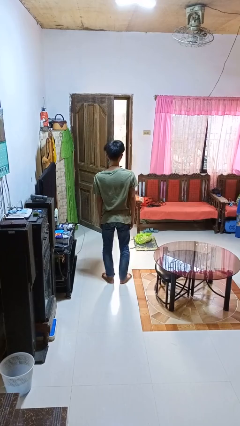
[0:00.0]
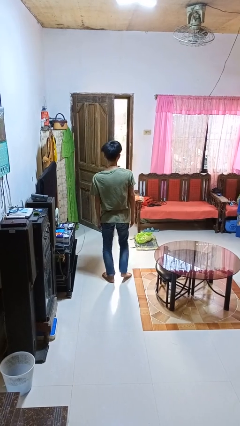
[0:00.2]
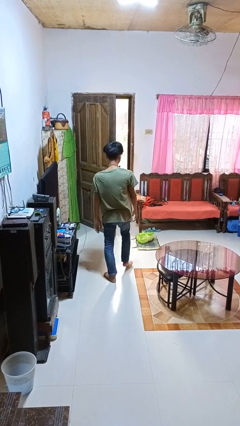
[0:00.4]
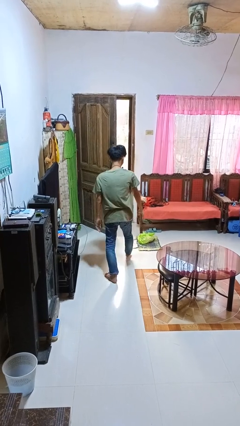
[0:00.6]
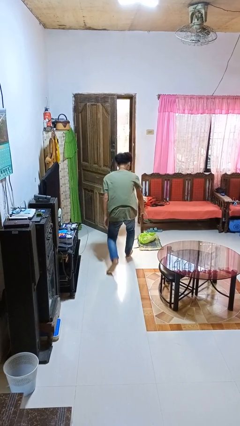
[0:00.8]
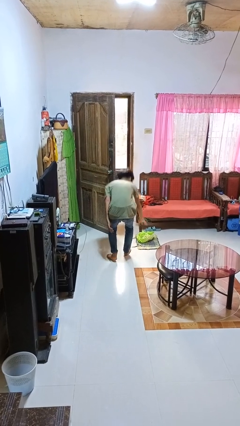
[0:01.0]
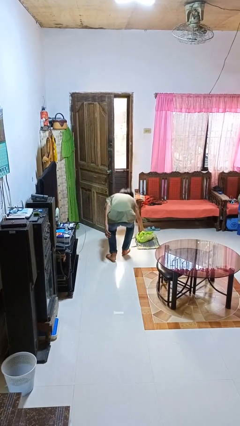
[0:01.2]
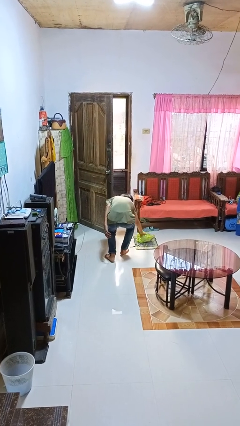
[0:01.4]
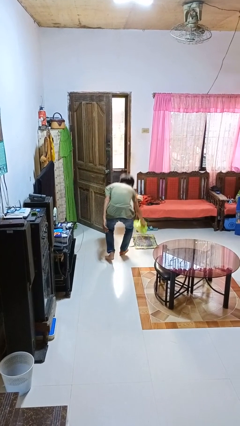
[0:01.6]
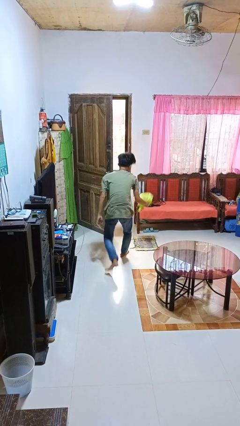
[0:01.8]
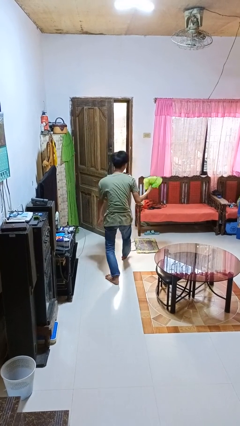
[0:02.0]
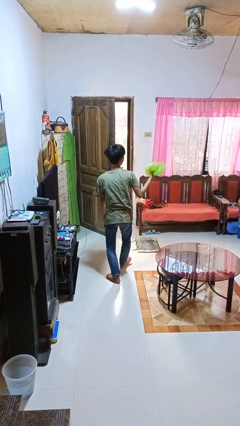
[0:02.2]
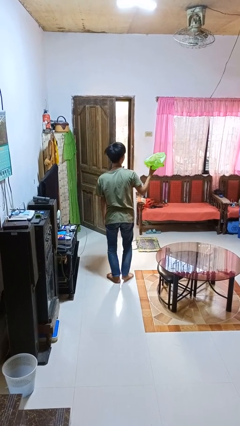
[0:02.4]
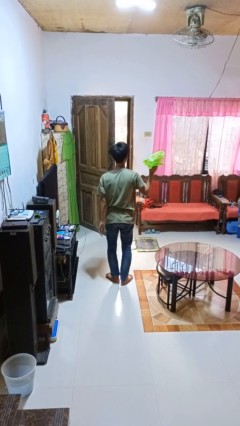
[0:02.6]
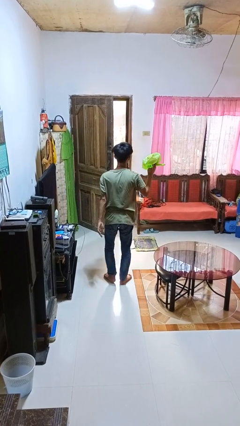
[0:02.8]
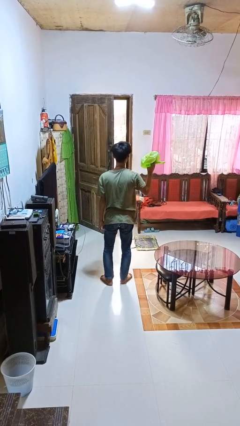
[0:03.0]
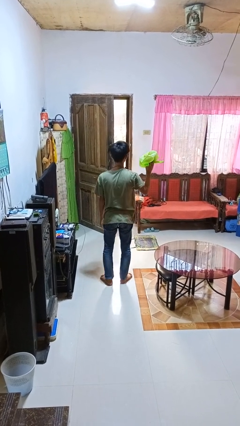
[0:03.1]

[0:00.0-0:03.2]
person picks up object from floor

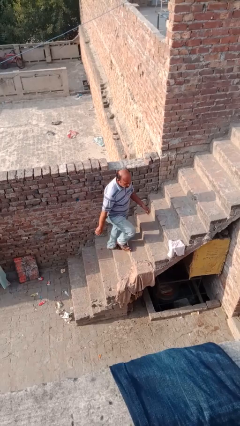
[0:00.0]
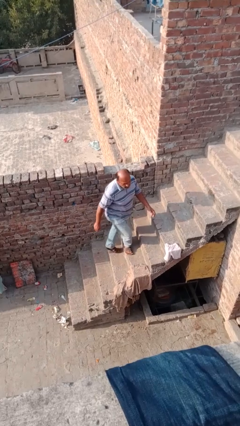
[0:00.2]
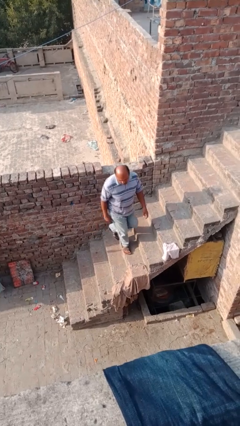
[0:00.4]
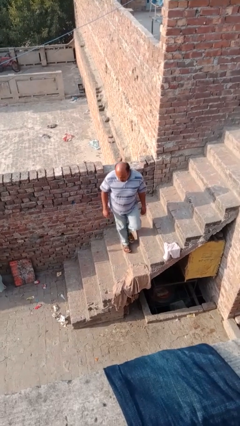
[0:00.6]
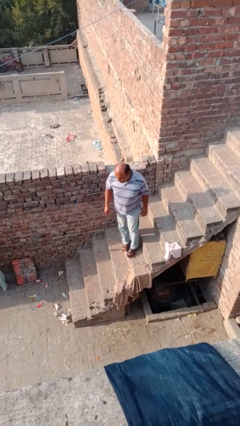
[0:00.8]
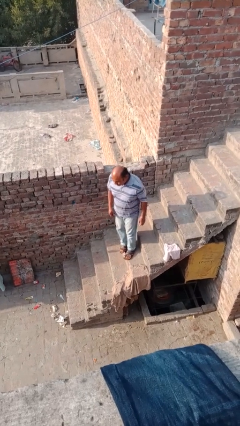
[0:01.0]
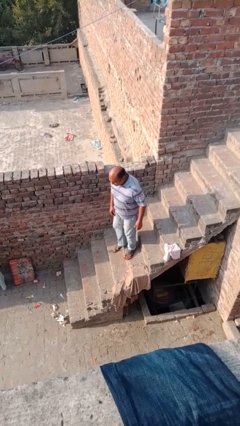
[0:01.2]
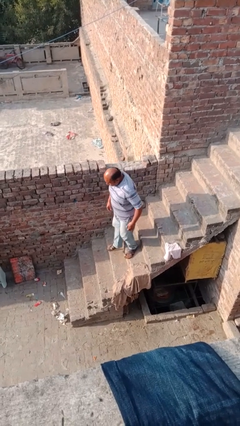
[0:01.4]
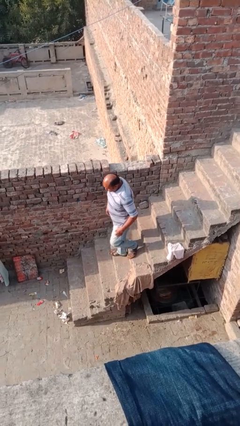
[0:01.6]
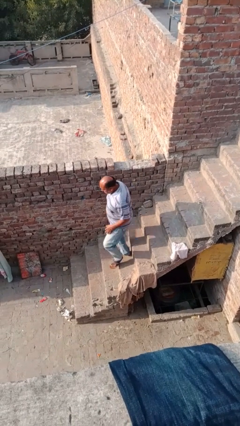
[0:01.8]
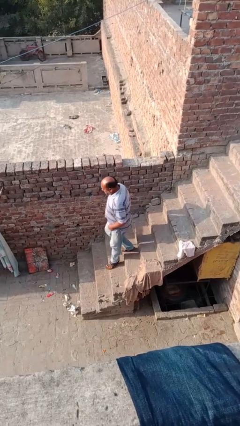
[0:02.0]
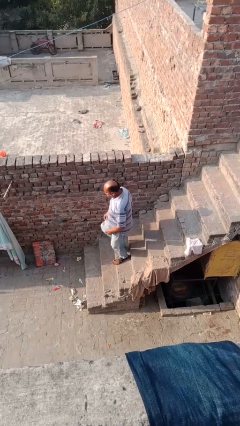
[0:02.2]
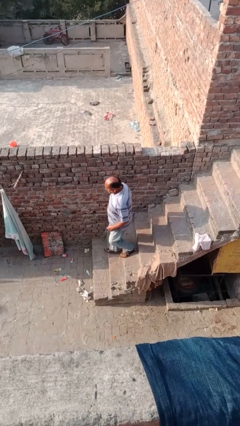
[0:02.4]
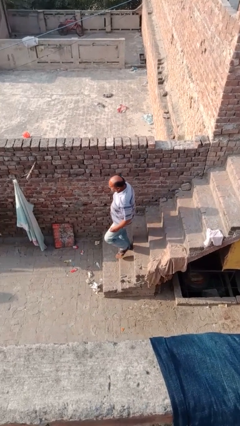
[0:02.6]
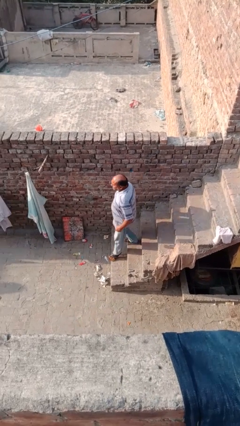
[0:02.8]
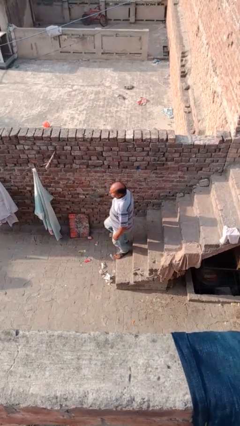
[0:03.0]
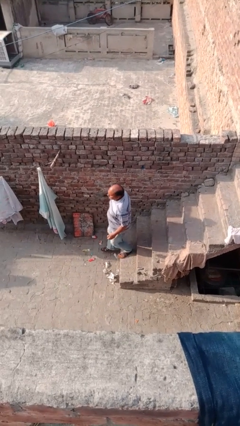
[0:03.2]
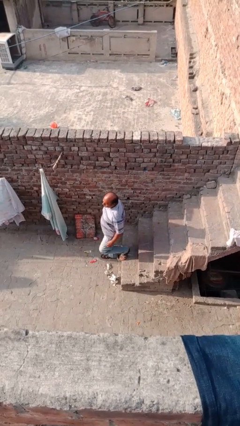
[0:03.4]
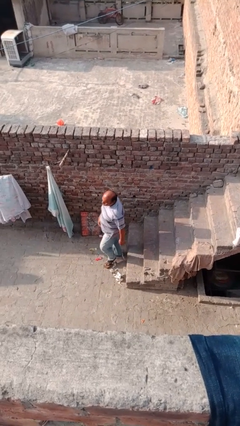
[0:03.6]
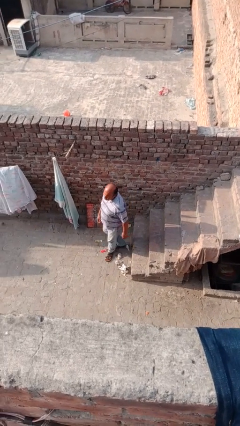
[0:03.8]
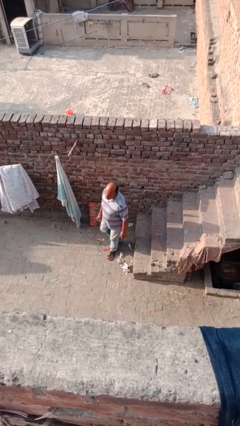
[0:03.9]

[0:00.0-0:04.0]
person climbs down stairs

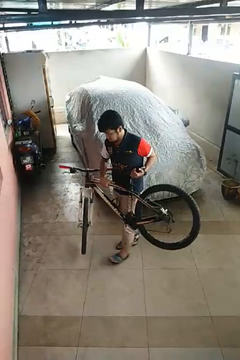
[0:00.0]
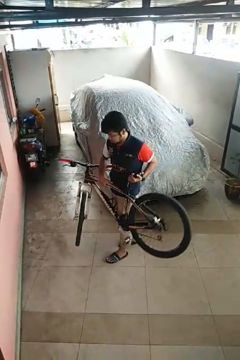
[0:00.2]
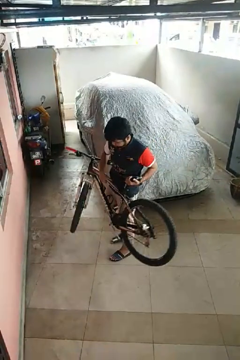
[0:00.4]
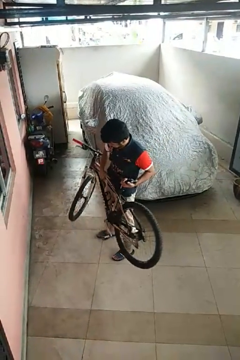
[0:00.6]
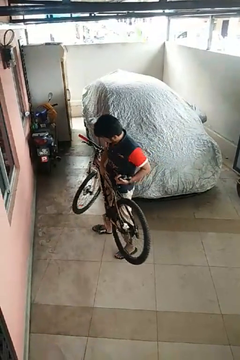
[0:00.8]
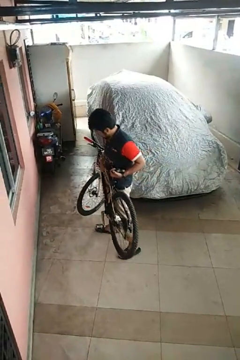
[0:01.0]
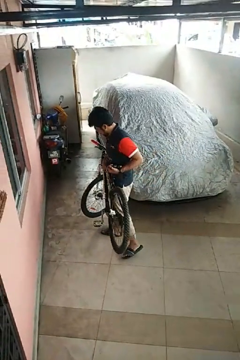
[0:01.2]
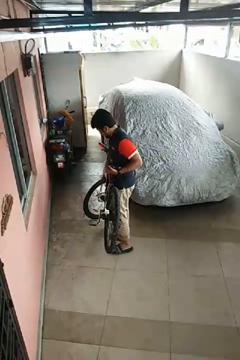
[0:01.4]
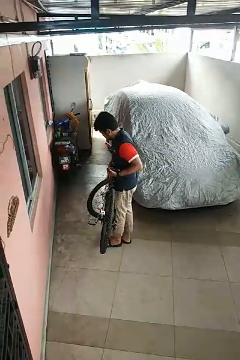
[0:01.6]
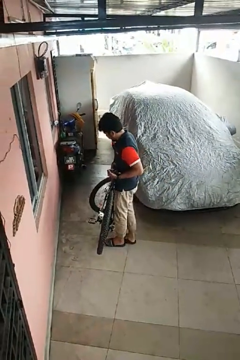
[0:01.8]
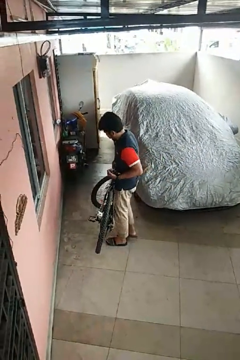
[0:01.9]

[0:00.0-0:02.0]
person carries bicycle

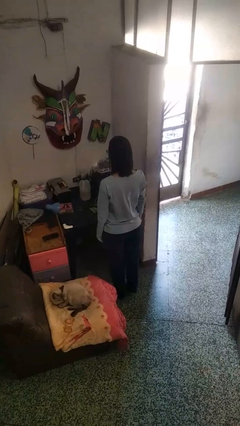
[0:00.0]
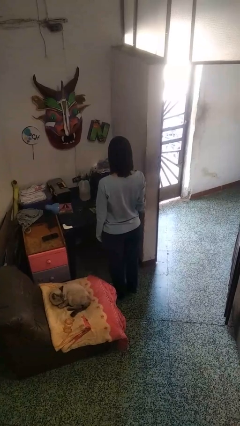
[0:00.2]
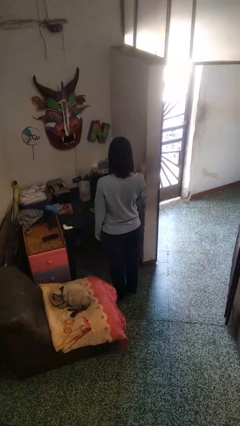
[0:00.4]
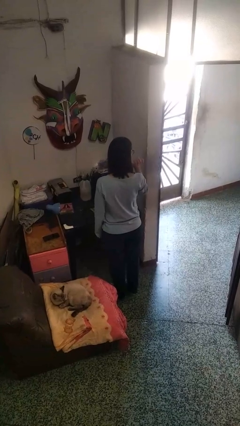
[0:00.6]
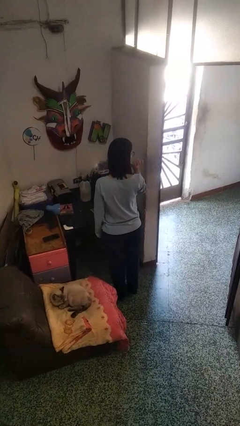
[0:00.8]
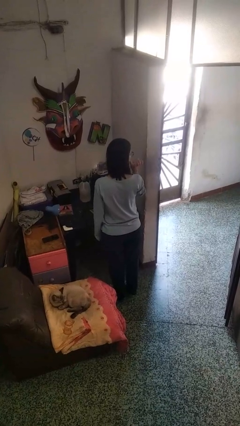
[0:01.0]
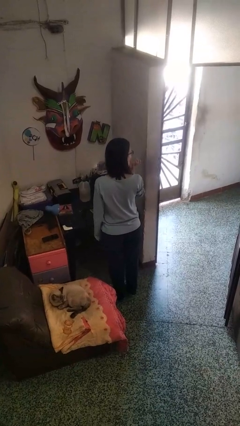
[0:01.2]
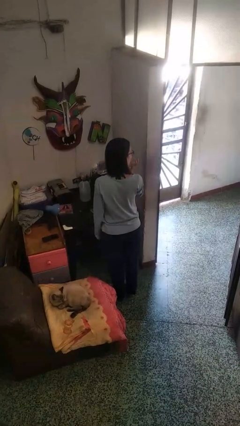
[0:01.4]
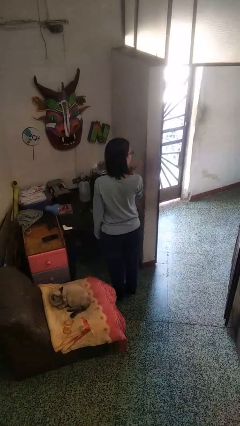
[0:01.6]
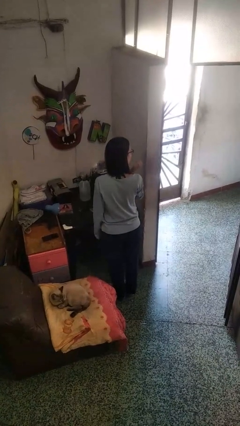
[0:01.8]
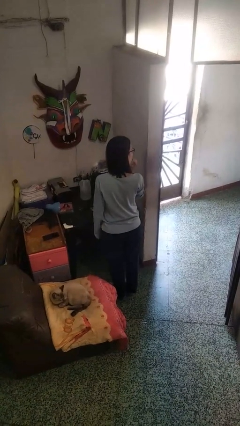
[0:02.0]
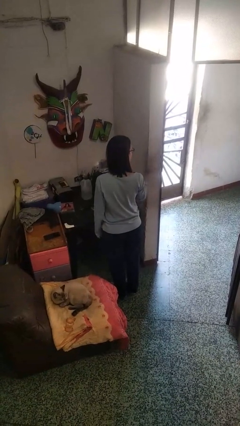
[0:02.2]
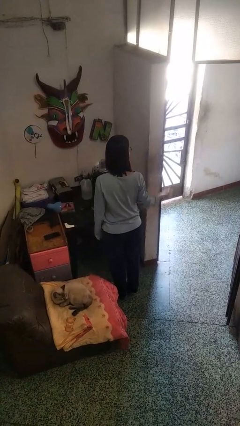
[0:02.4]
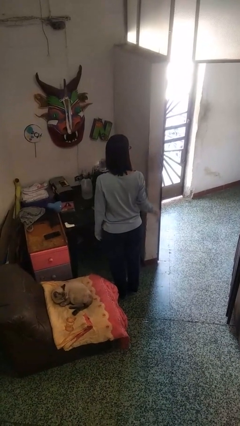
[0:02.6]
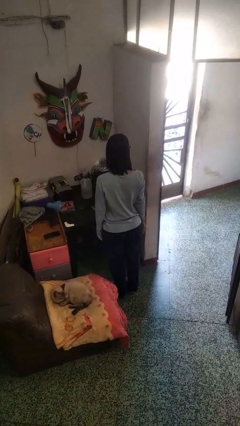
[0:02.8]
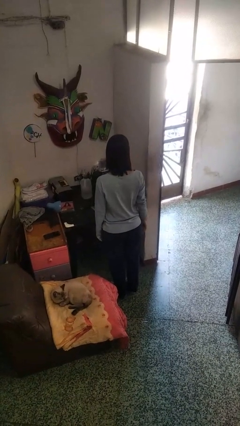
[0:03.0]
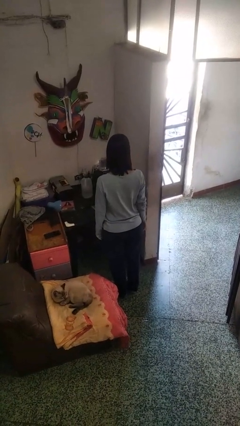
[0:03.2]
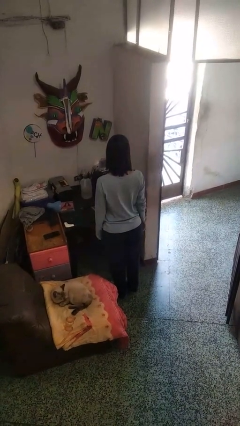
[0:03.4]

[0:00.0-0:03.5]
person licks fingers

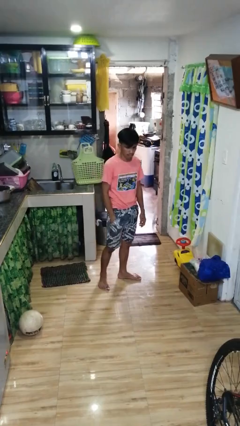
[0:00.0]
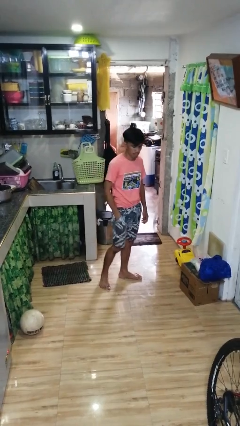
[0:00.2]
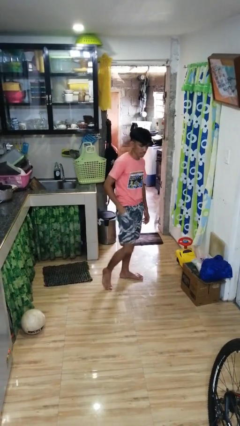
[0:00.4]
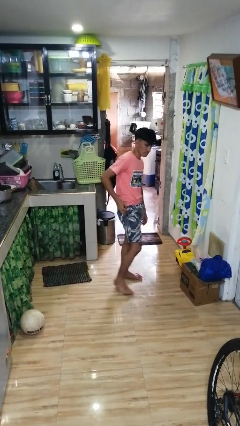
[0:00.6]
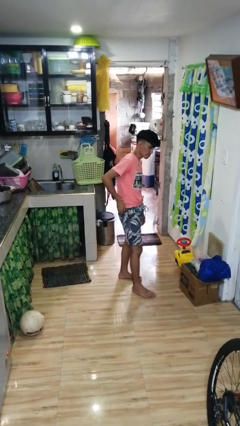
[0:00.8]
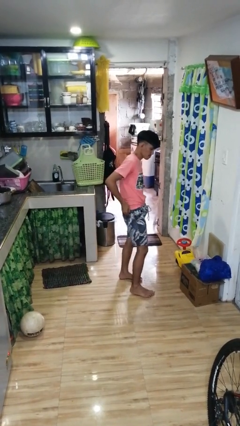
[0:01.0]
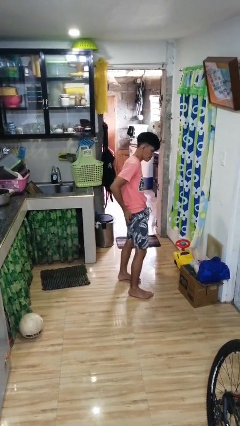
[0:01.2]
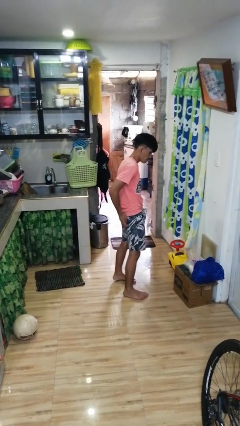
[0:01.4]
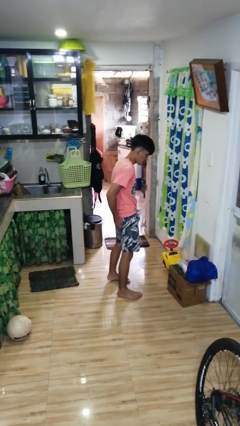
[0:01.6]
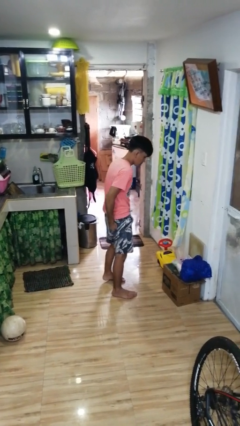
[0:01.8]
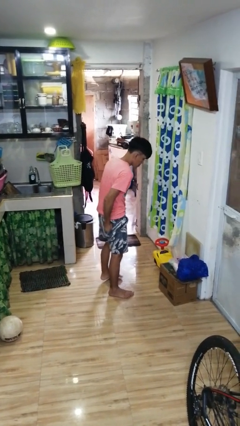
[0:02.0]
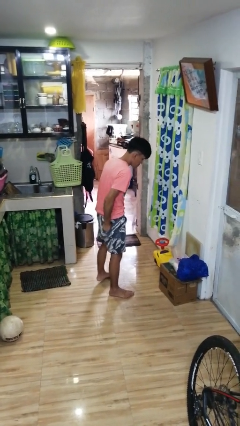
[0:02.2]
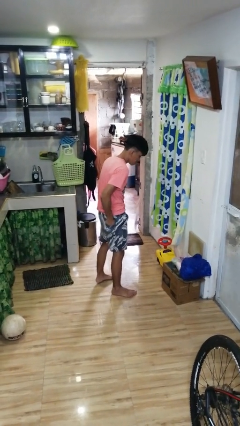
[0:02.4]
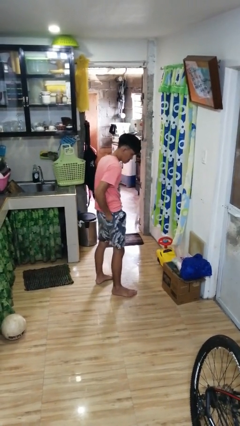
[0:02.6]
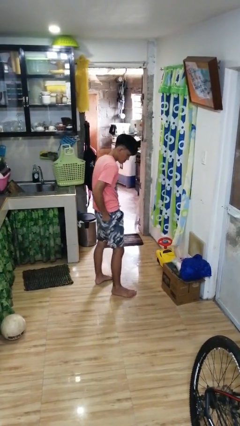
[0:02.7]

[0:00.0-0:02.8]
person puts hands in back pockets

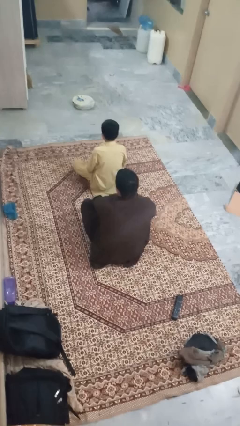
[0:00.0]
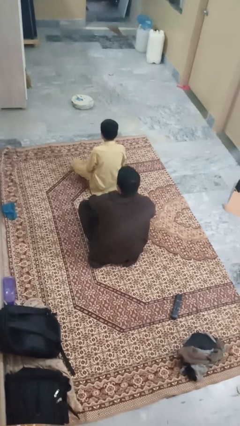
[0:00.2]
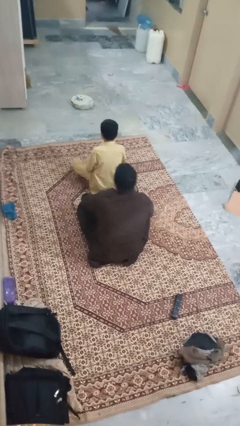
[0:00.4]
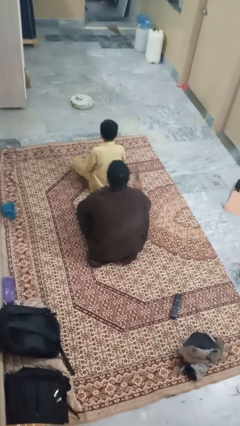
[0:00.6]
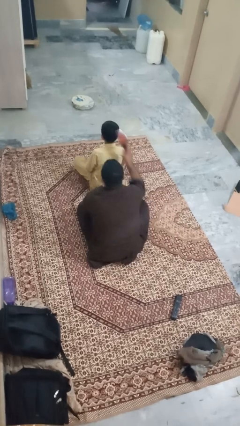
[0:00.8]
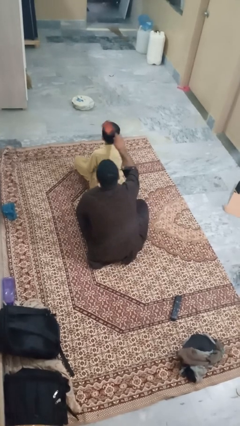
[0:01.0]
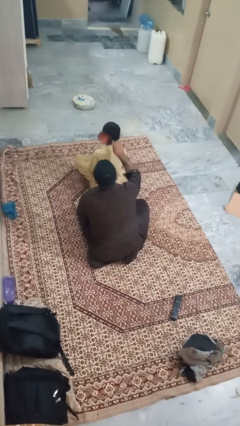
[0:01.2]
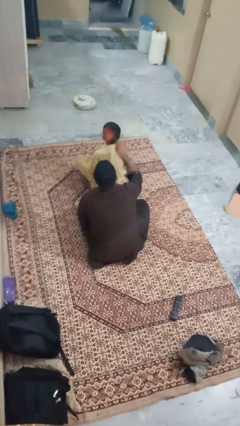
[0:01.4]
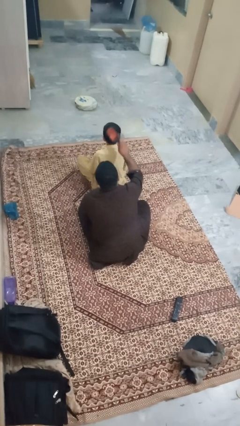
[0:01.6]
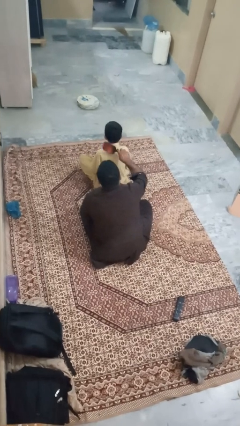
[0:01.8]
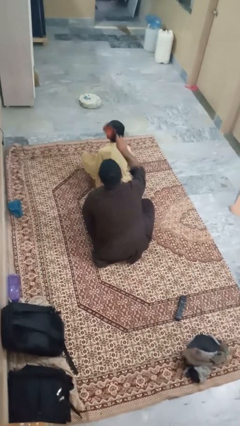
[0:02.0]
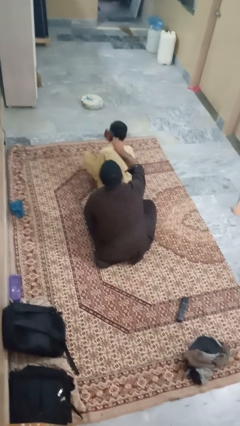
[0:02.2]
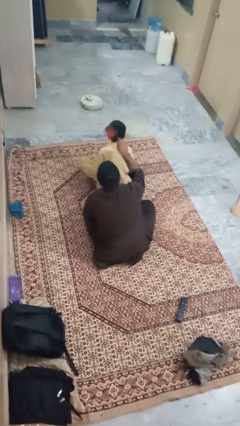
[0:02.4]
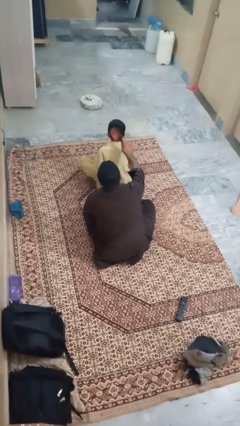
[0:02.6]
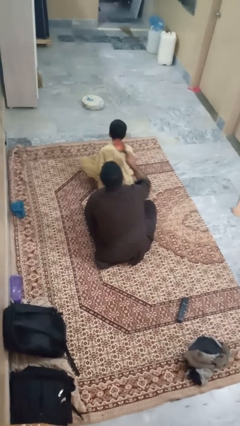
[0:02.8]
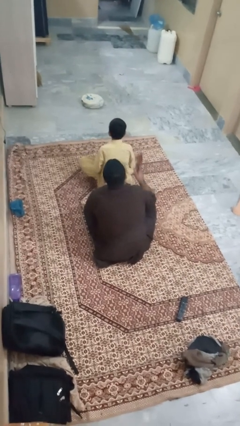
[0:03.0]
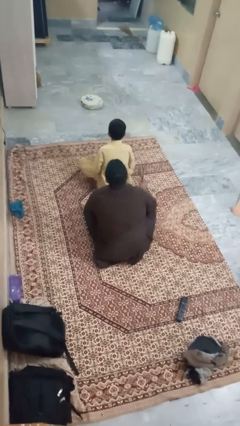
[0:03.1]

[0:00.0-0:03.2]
person brushes hair of person
